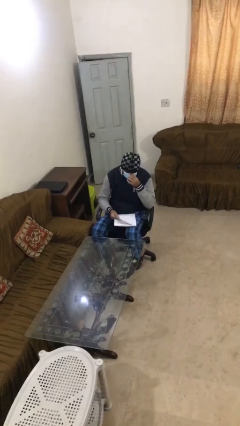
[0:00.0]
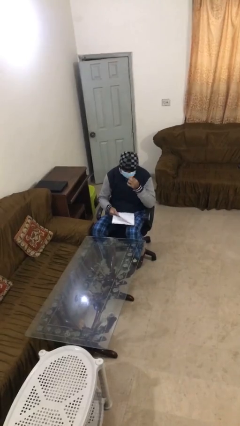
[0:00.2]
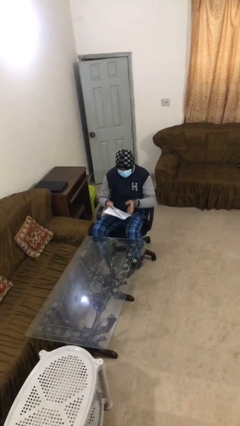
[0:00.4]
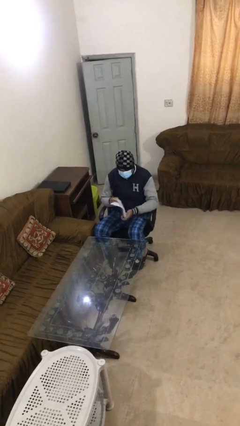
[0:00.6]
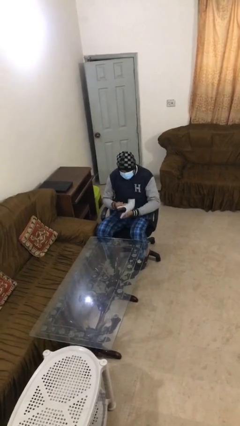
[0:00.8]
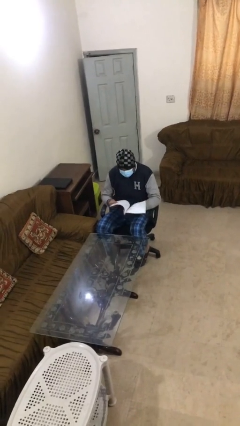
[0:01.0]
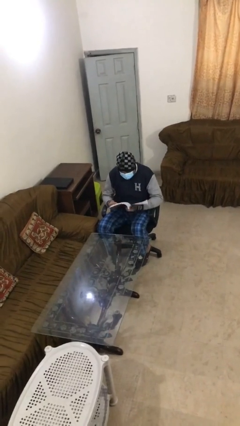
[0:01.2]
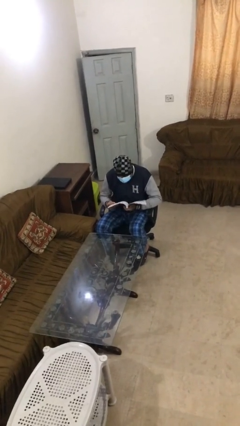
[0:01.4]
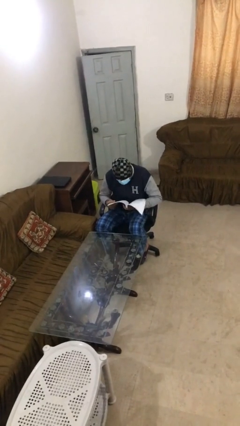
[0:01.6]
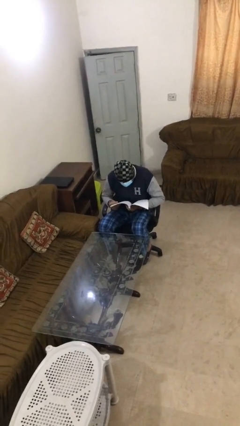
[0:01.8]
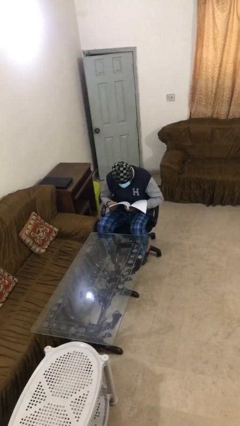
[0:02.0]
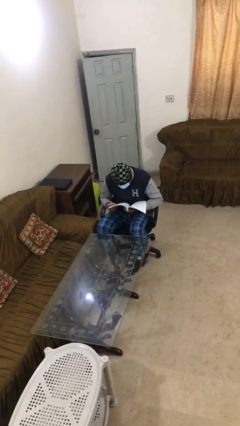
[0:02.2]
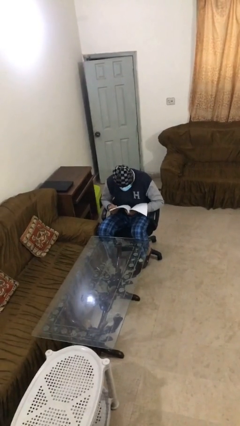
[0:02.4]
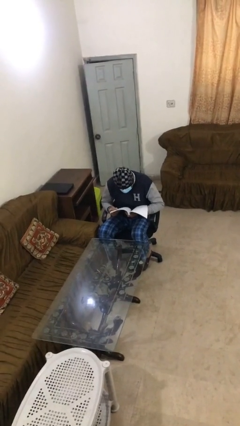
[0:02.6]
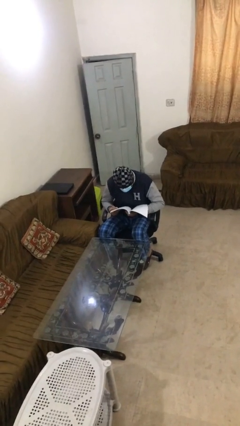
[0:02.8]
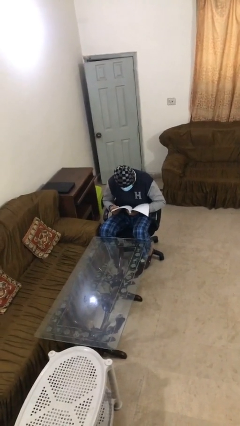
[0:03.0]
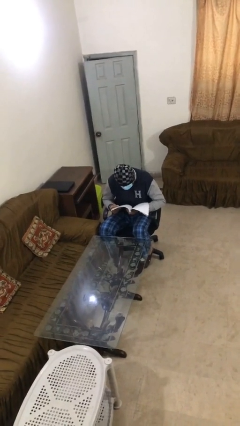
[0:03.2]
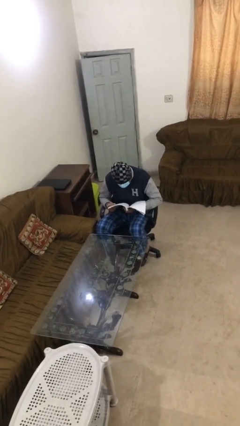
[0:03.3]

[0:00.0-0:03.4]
person reads document

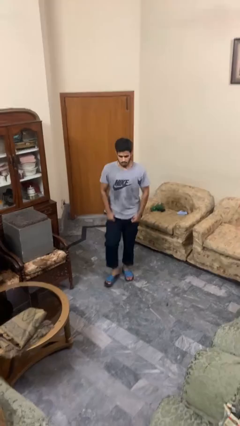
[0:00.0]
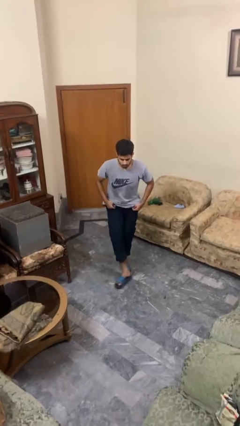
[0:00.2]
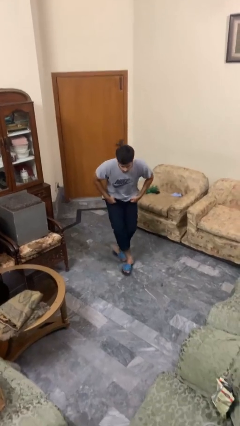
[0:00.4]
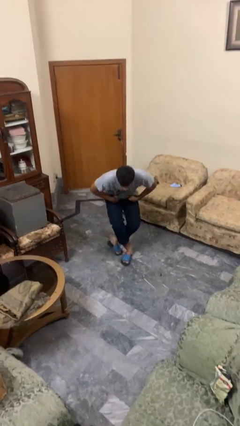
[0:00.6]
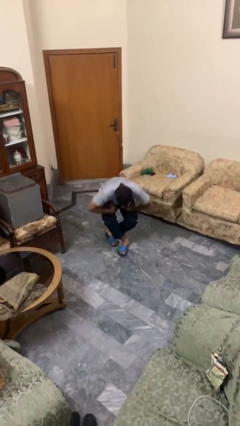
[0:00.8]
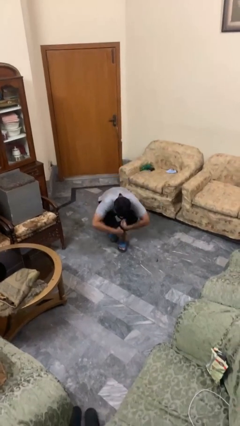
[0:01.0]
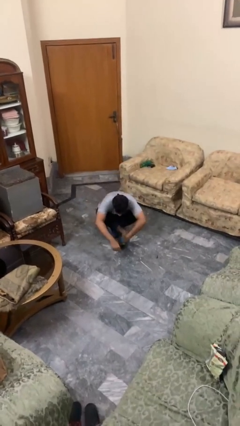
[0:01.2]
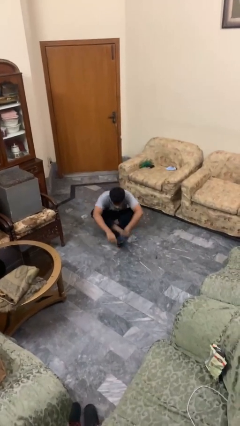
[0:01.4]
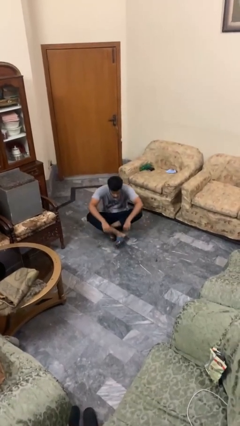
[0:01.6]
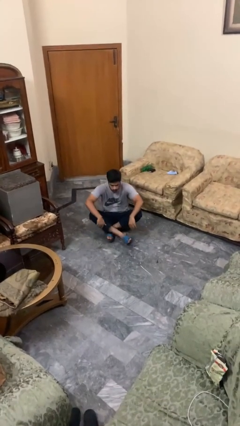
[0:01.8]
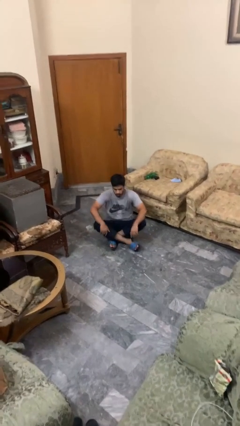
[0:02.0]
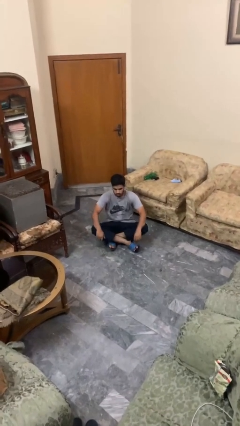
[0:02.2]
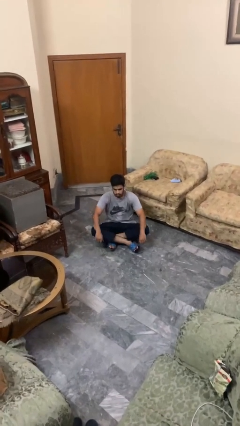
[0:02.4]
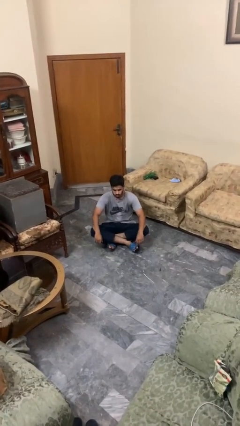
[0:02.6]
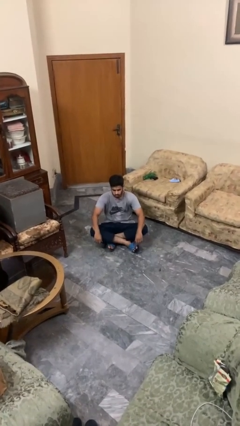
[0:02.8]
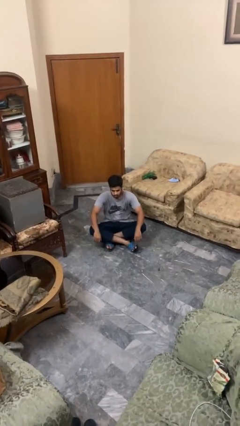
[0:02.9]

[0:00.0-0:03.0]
person sits crisscross

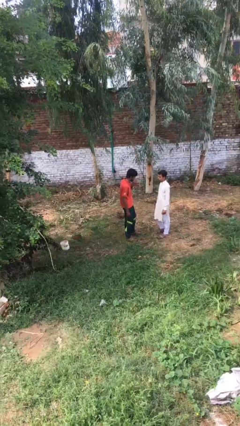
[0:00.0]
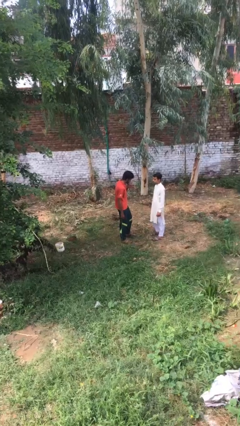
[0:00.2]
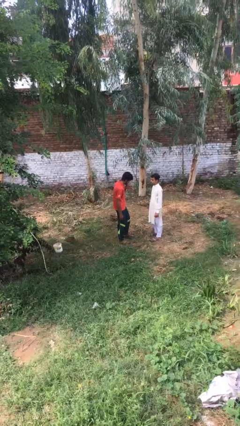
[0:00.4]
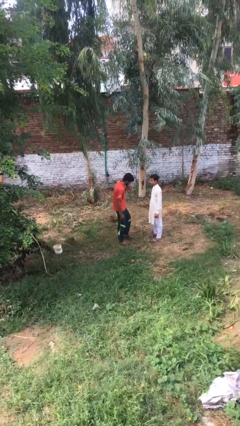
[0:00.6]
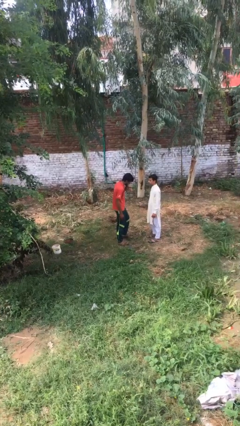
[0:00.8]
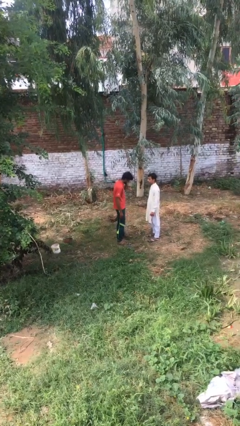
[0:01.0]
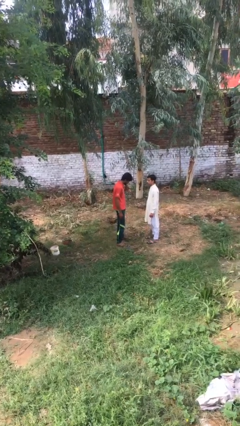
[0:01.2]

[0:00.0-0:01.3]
person talks to person

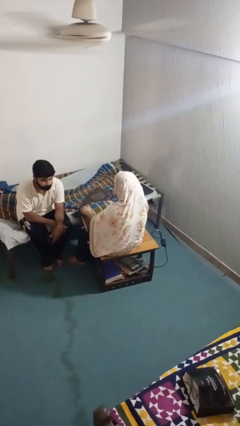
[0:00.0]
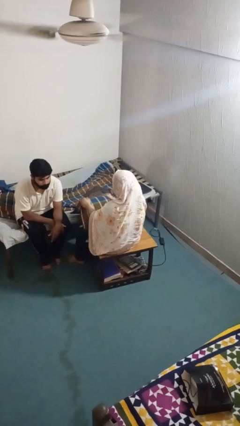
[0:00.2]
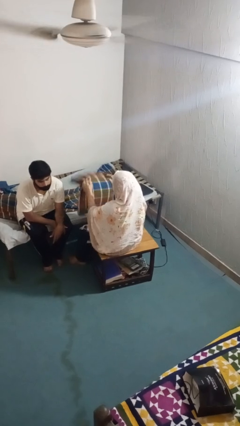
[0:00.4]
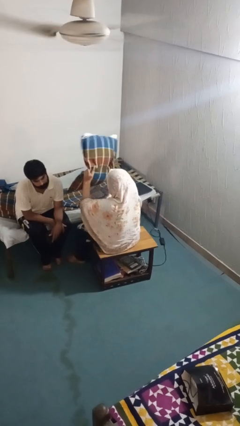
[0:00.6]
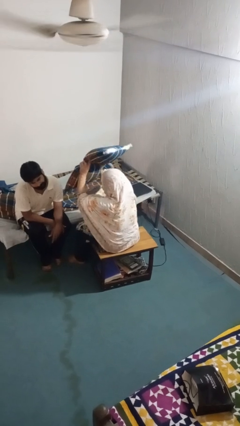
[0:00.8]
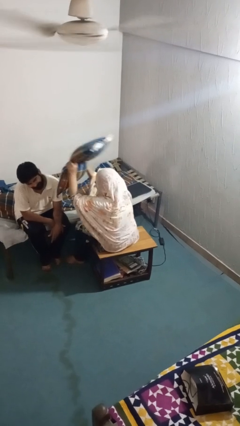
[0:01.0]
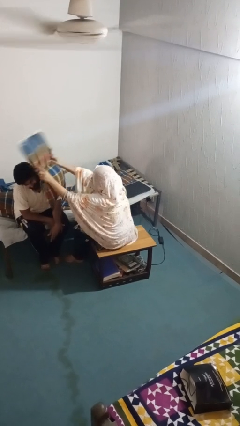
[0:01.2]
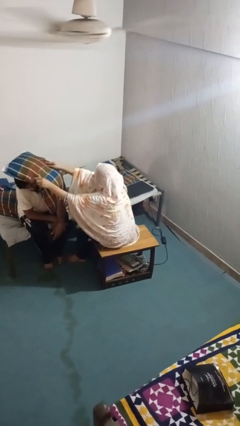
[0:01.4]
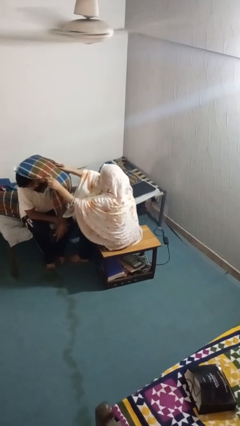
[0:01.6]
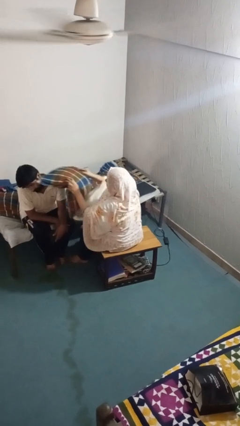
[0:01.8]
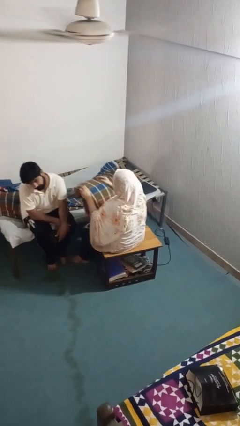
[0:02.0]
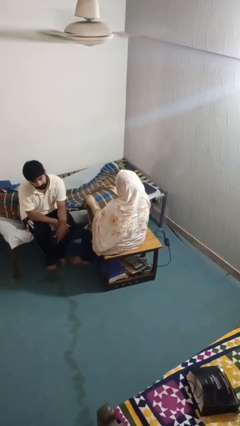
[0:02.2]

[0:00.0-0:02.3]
person hits person with pillow

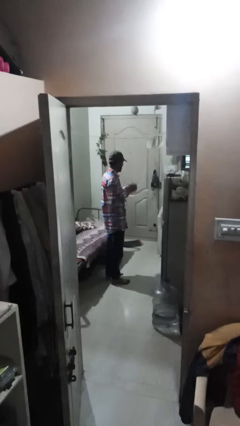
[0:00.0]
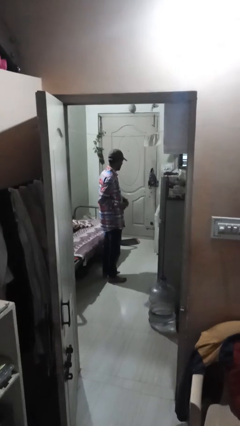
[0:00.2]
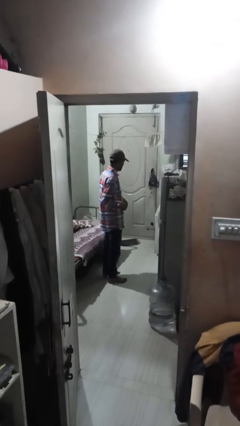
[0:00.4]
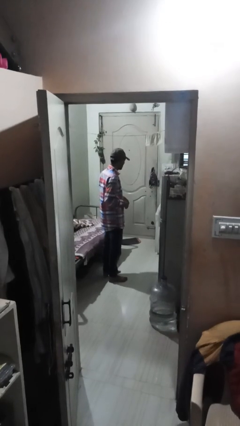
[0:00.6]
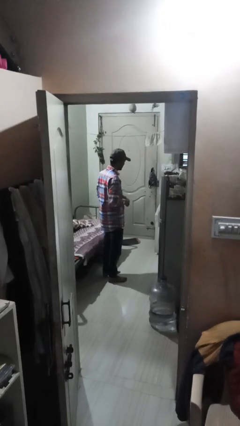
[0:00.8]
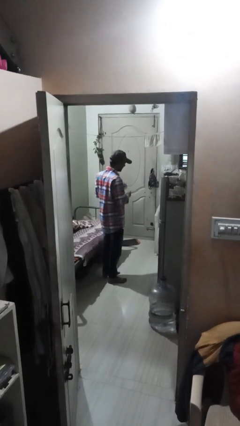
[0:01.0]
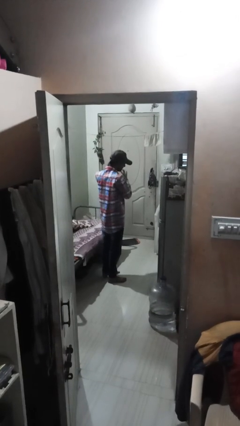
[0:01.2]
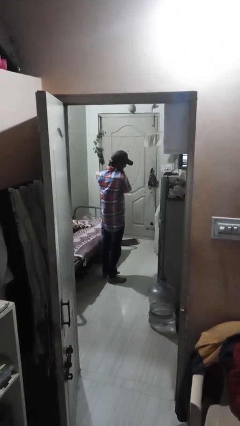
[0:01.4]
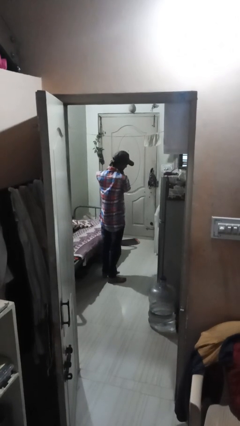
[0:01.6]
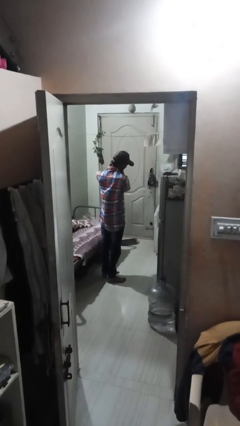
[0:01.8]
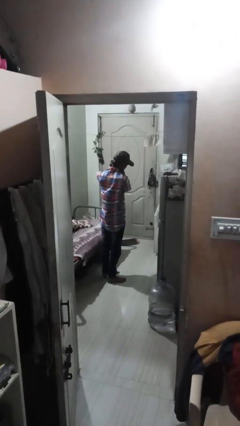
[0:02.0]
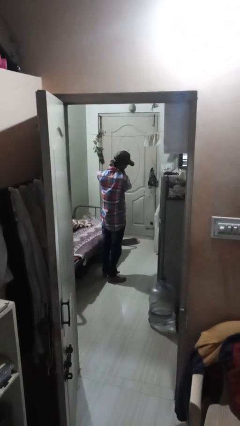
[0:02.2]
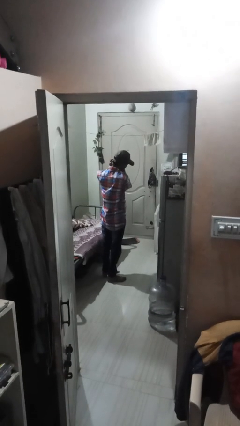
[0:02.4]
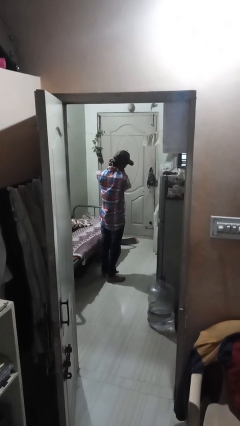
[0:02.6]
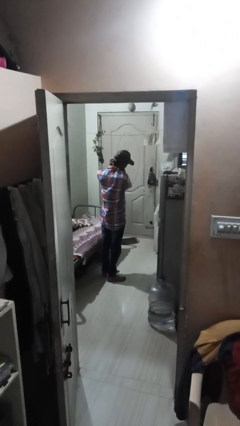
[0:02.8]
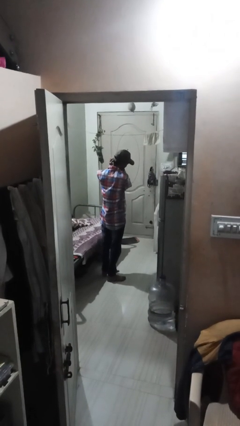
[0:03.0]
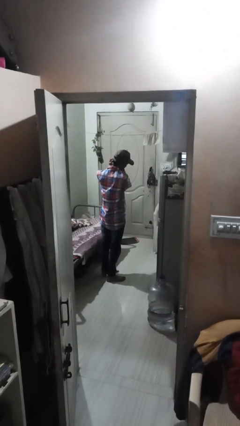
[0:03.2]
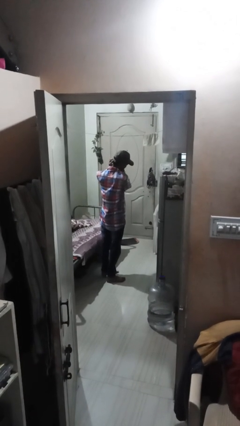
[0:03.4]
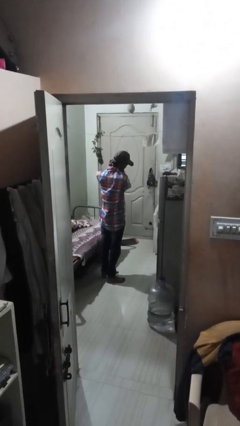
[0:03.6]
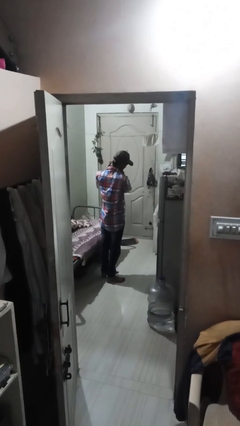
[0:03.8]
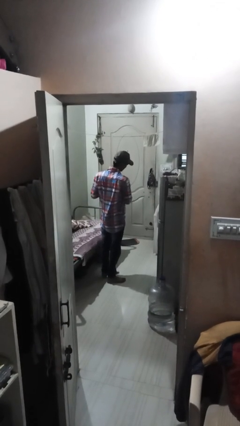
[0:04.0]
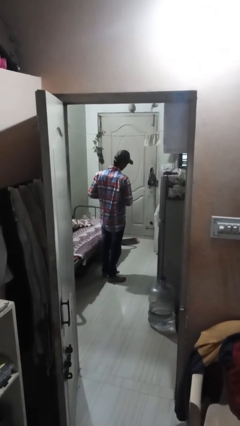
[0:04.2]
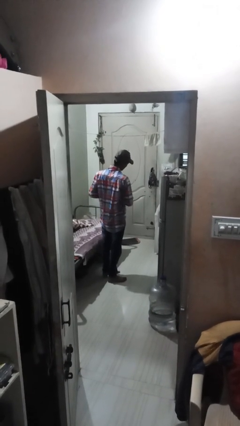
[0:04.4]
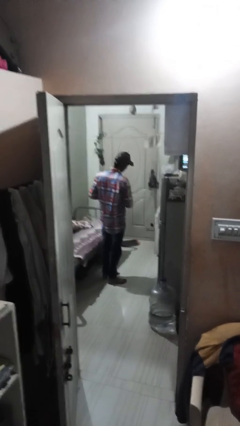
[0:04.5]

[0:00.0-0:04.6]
person puts on earrings

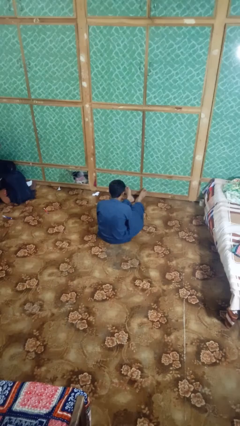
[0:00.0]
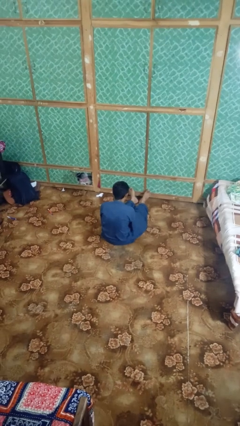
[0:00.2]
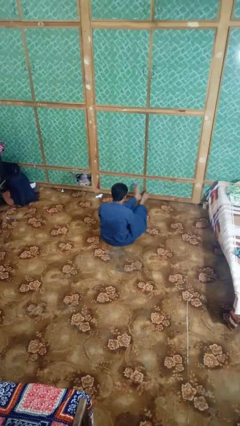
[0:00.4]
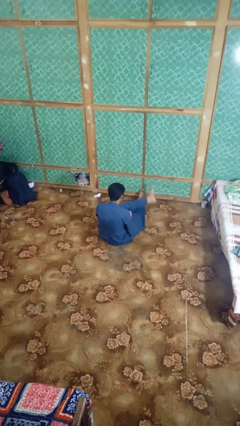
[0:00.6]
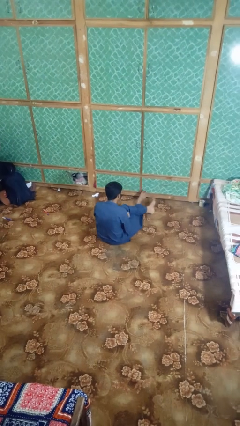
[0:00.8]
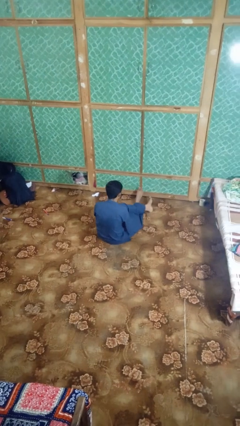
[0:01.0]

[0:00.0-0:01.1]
person crosses legs

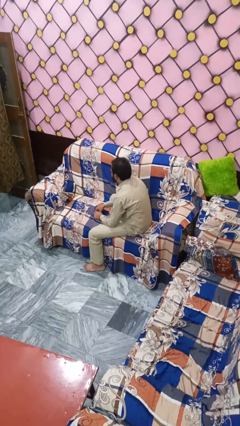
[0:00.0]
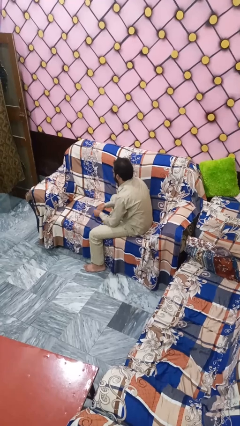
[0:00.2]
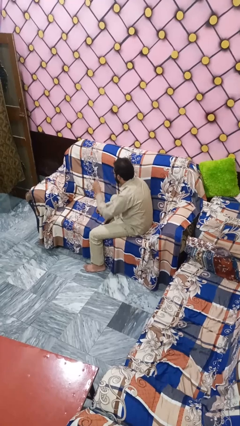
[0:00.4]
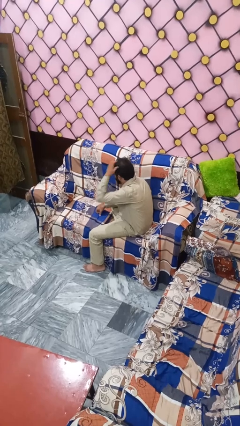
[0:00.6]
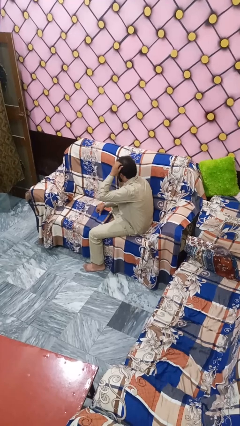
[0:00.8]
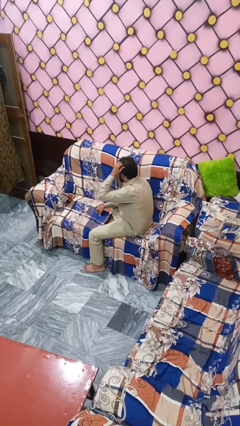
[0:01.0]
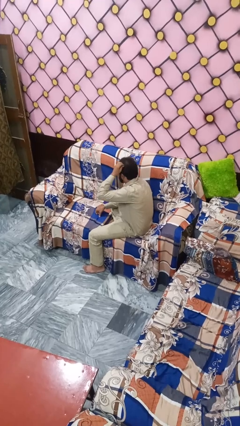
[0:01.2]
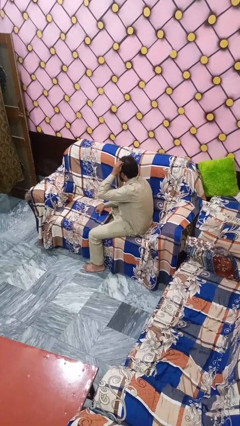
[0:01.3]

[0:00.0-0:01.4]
person strokes hair

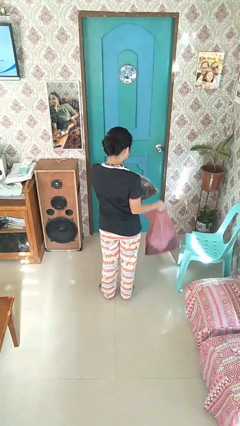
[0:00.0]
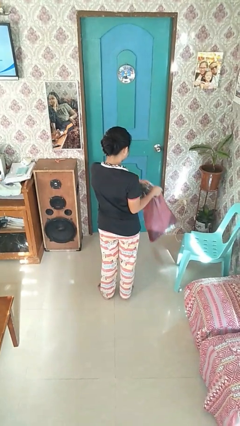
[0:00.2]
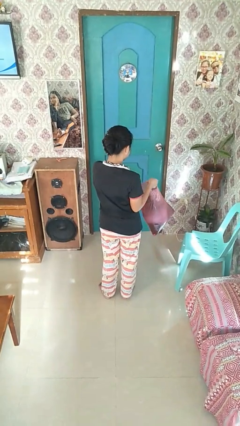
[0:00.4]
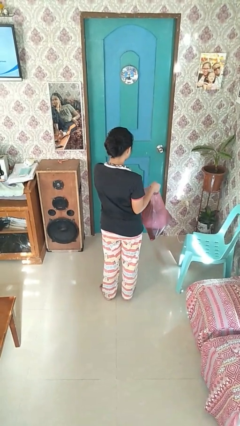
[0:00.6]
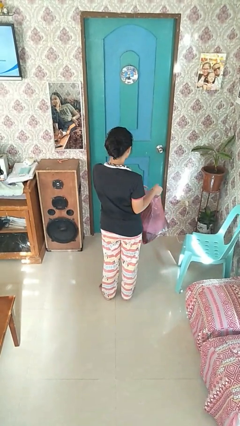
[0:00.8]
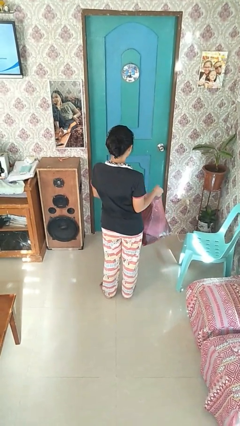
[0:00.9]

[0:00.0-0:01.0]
person puts object into bag
